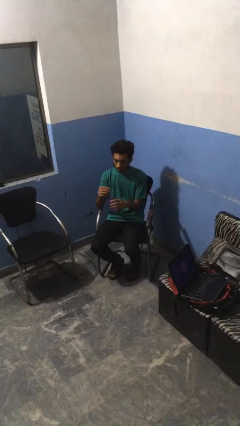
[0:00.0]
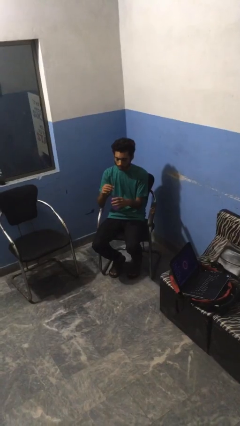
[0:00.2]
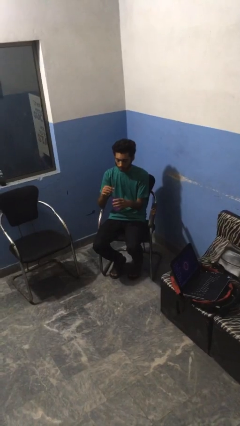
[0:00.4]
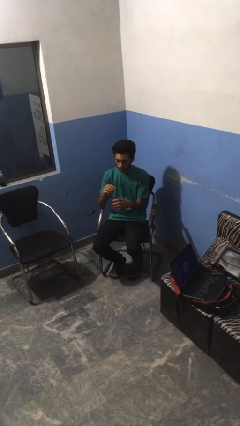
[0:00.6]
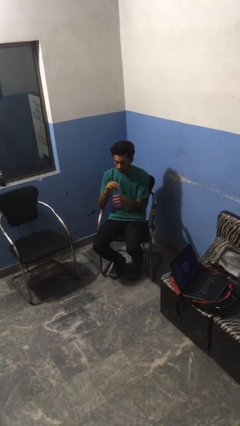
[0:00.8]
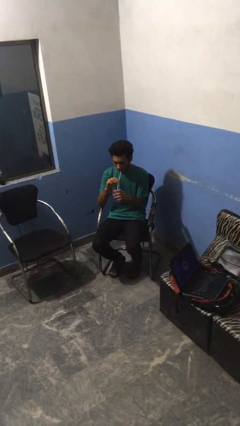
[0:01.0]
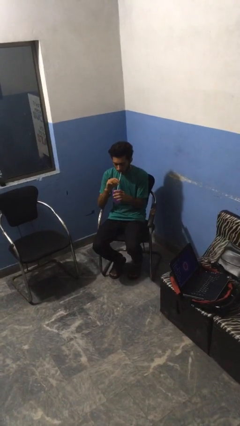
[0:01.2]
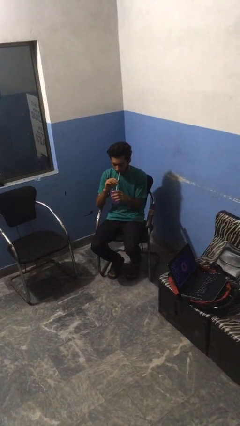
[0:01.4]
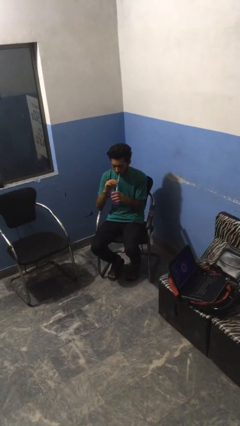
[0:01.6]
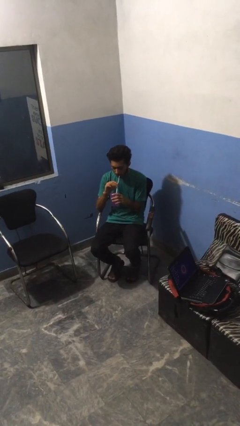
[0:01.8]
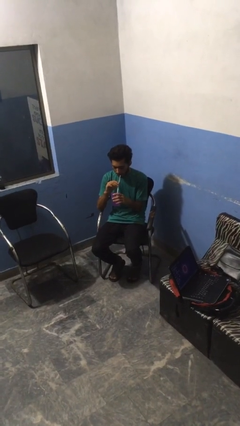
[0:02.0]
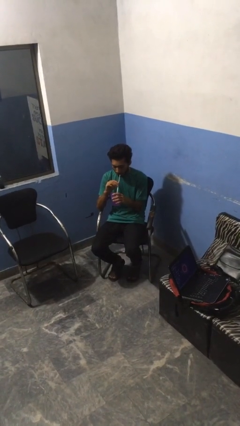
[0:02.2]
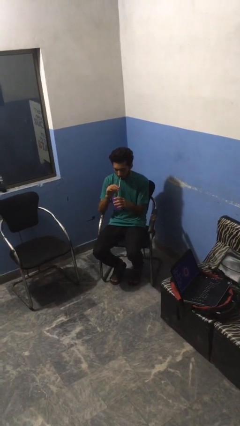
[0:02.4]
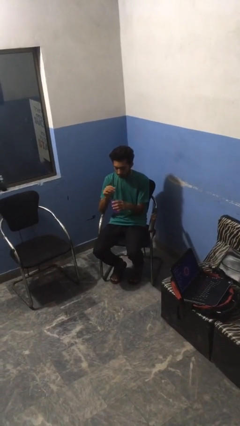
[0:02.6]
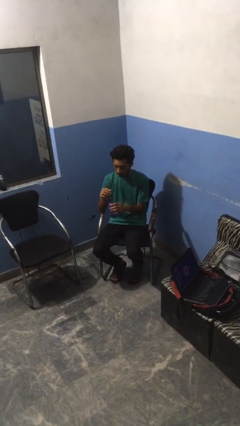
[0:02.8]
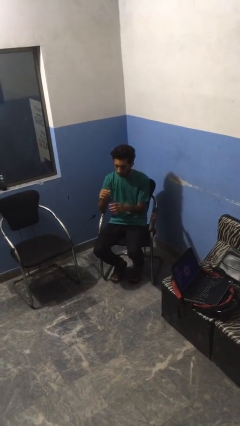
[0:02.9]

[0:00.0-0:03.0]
person drinks from straw

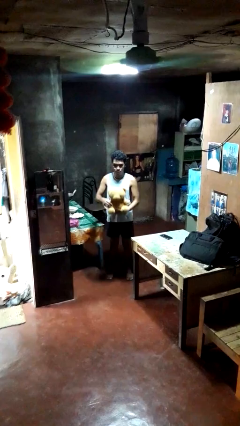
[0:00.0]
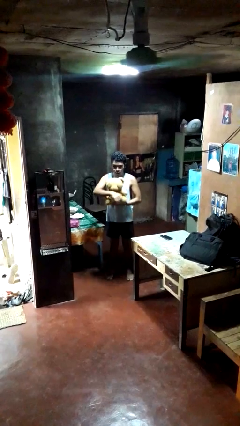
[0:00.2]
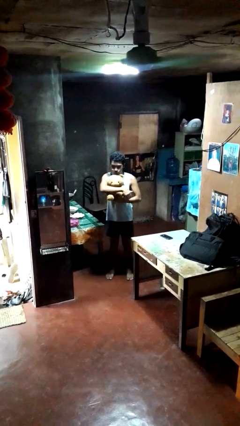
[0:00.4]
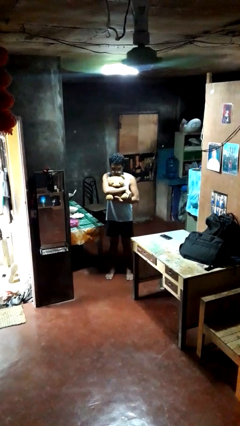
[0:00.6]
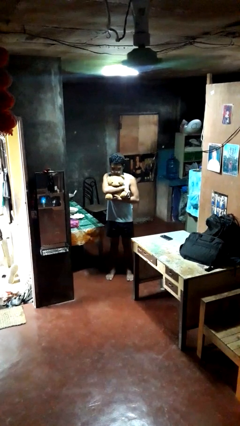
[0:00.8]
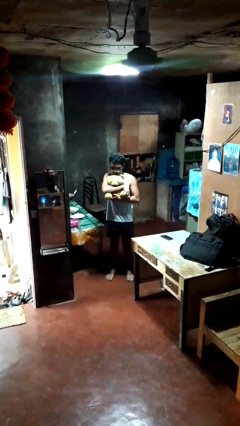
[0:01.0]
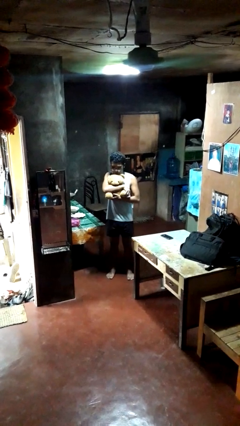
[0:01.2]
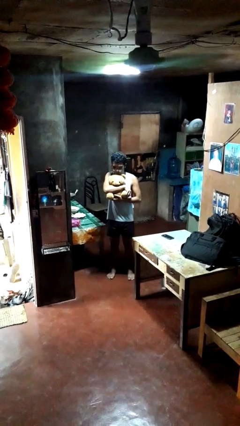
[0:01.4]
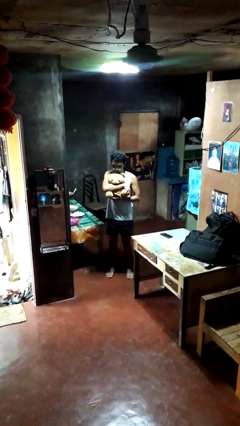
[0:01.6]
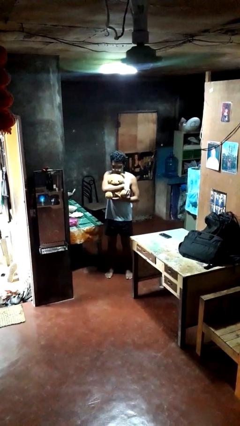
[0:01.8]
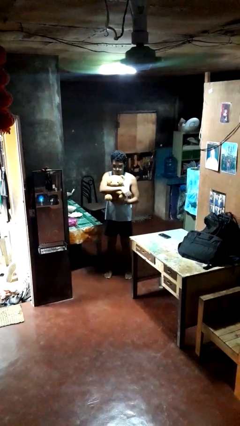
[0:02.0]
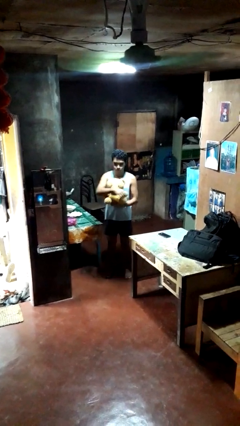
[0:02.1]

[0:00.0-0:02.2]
person hugs stuffed animal

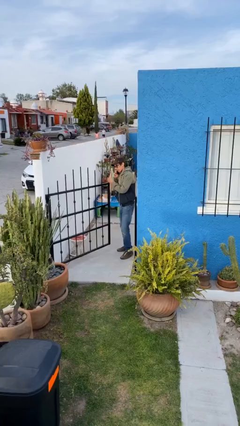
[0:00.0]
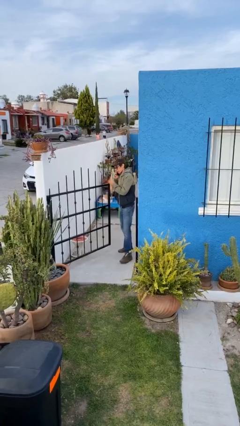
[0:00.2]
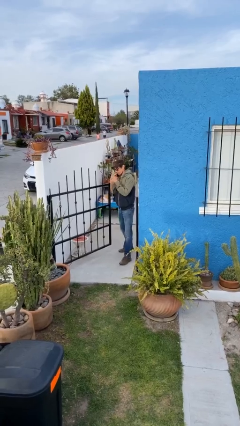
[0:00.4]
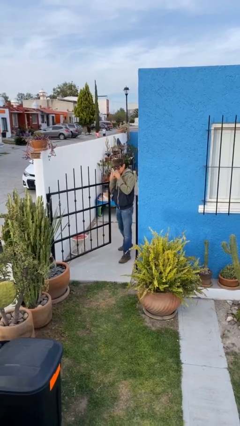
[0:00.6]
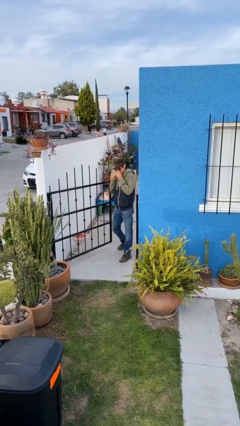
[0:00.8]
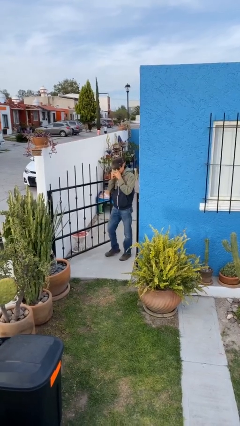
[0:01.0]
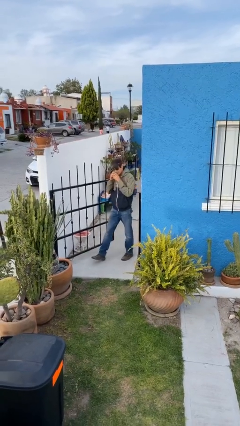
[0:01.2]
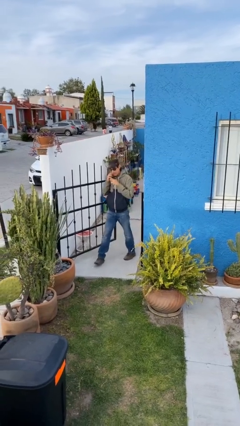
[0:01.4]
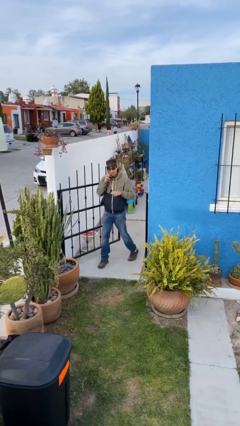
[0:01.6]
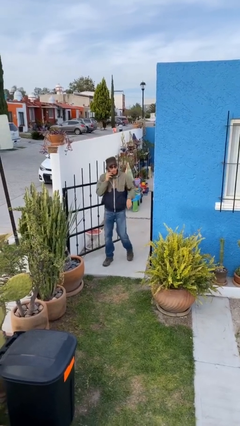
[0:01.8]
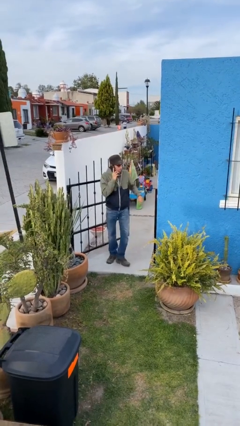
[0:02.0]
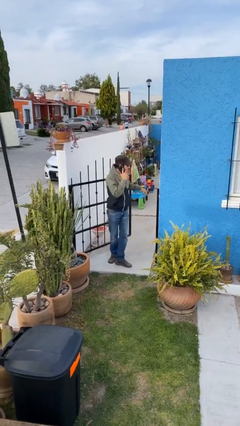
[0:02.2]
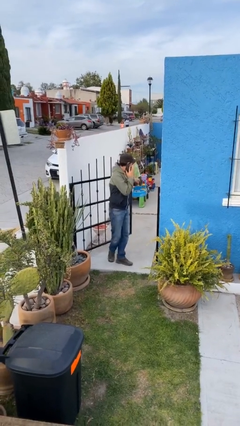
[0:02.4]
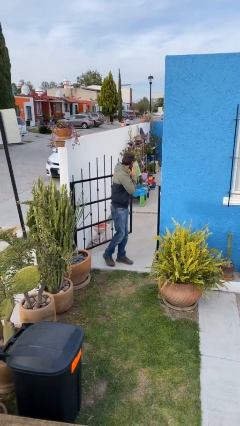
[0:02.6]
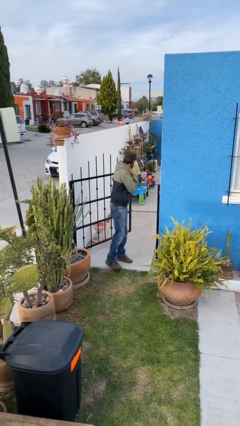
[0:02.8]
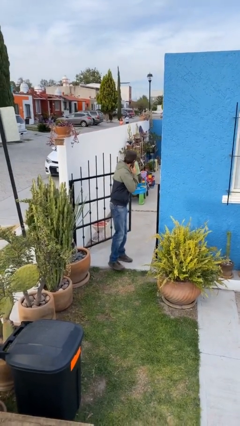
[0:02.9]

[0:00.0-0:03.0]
person enters scene through structure

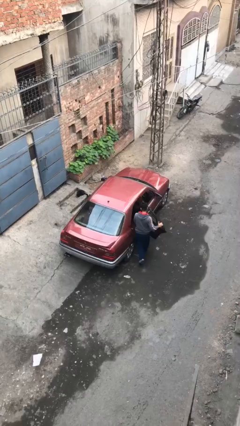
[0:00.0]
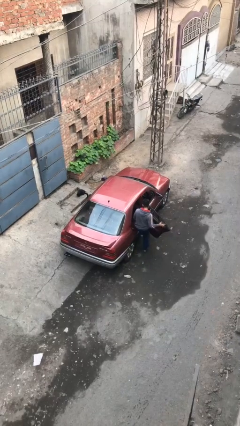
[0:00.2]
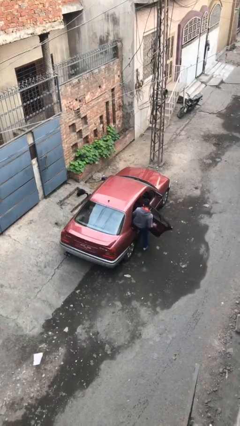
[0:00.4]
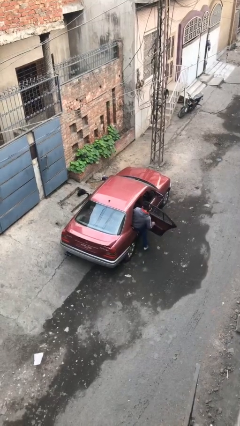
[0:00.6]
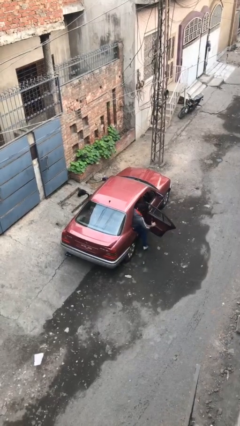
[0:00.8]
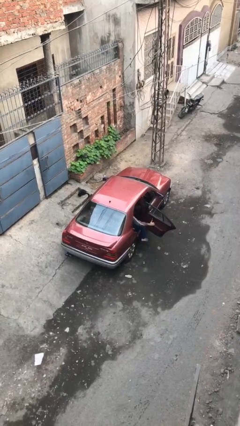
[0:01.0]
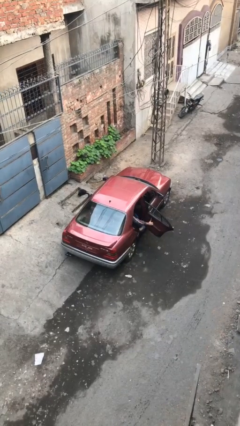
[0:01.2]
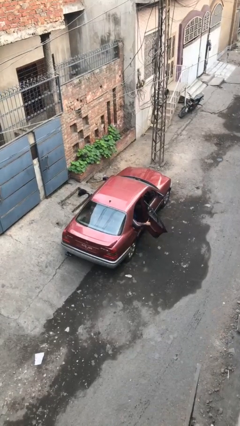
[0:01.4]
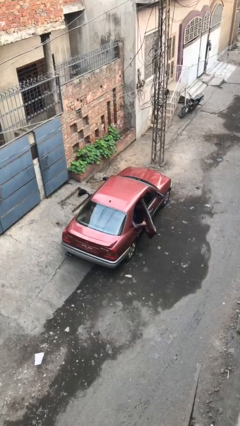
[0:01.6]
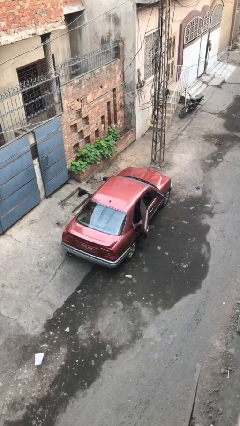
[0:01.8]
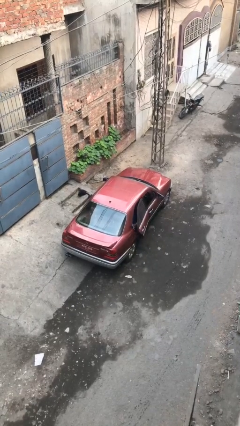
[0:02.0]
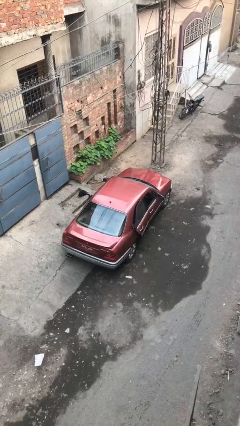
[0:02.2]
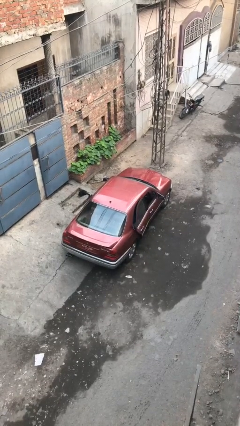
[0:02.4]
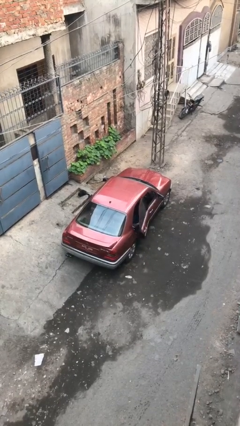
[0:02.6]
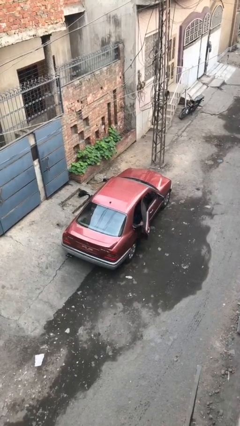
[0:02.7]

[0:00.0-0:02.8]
car picks up person

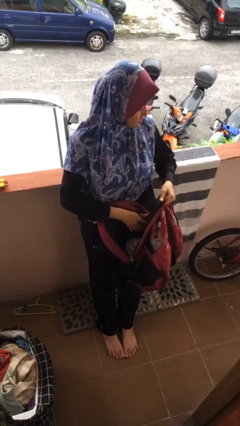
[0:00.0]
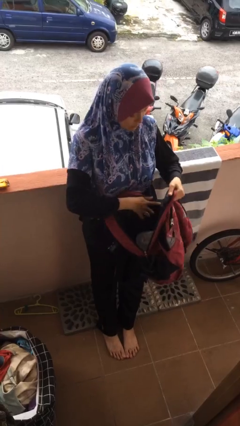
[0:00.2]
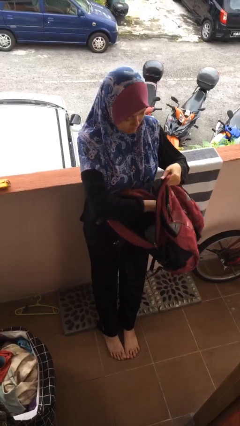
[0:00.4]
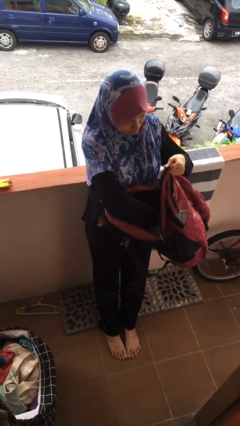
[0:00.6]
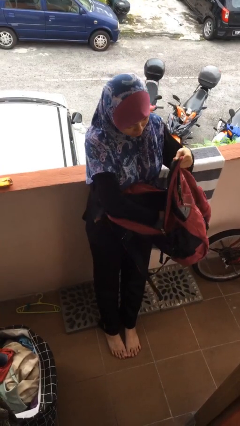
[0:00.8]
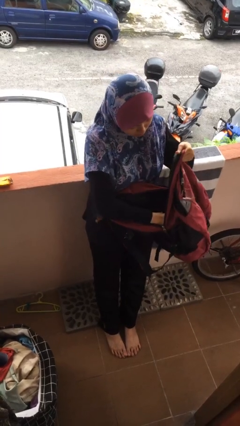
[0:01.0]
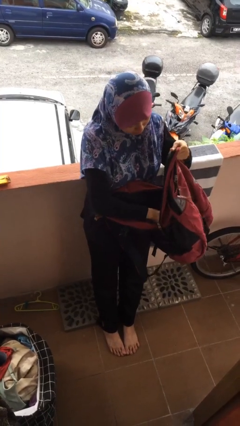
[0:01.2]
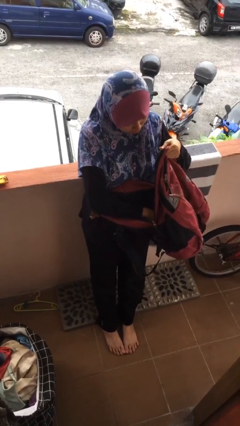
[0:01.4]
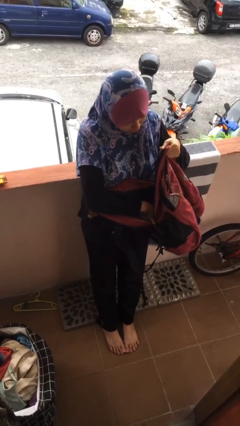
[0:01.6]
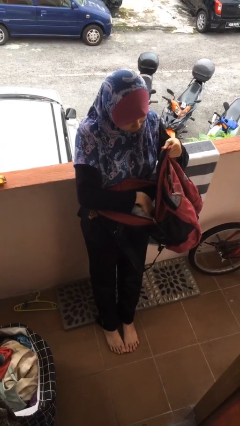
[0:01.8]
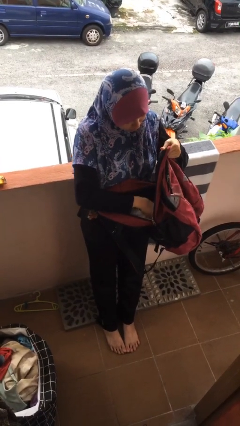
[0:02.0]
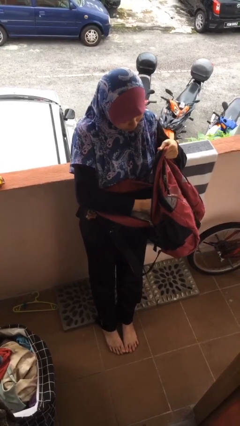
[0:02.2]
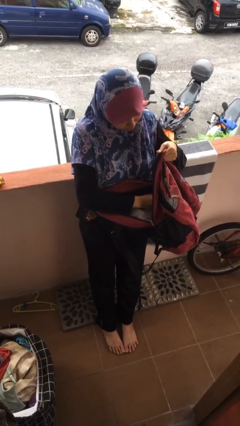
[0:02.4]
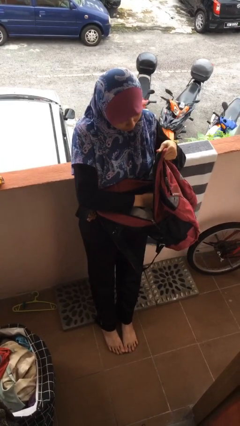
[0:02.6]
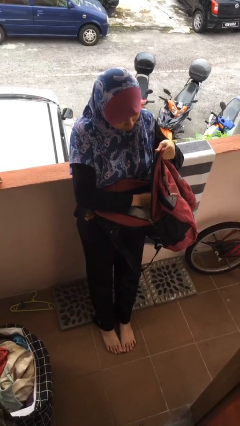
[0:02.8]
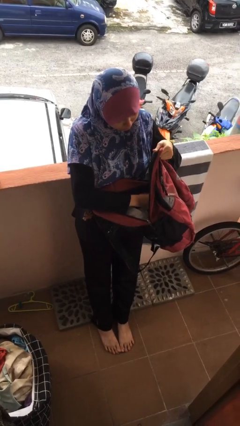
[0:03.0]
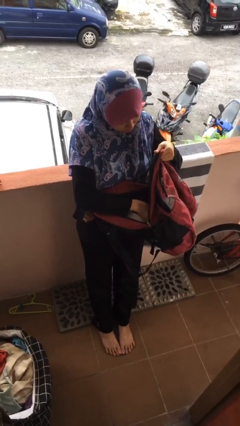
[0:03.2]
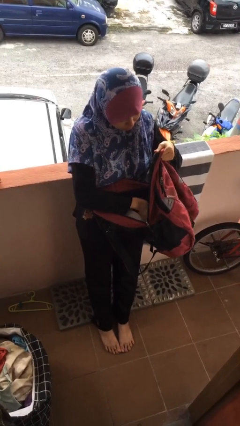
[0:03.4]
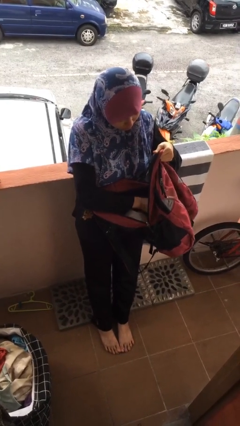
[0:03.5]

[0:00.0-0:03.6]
person searches in backpack

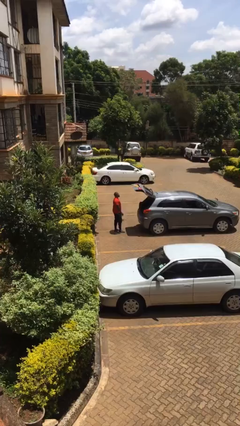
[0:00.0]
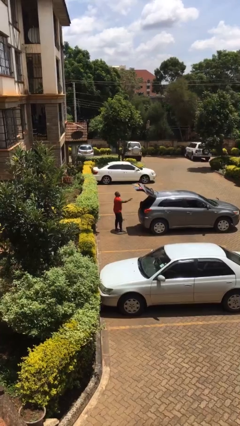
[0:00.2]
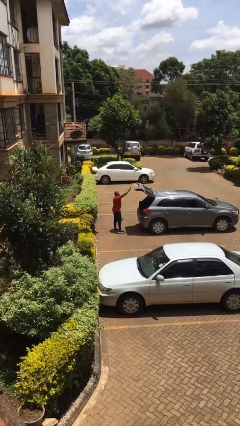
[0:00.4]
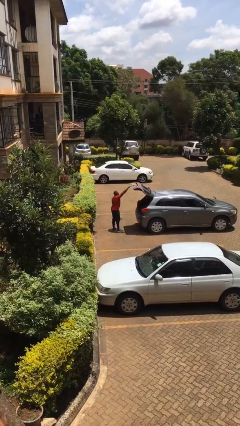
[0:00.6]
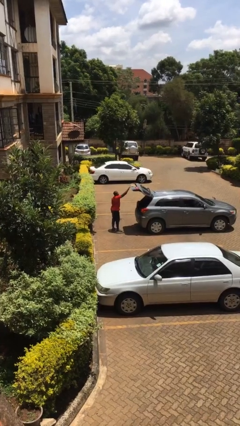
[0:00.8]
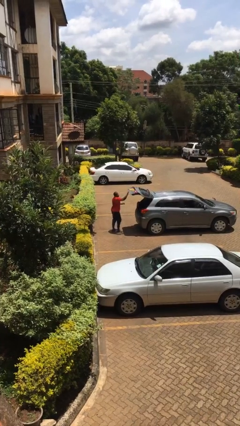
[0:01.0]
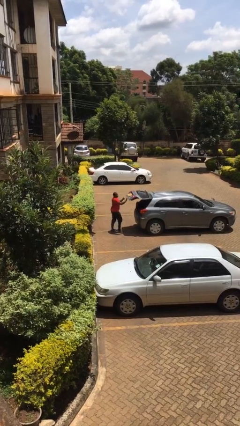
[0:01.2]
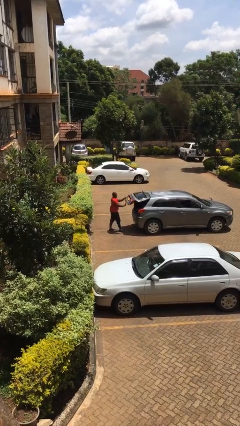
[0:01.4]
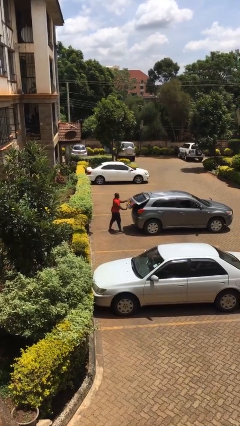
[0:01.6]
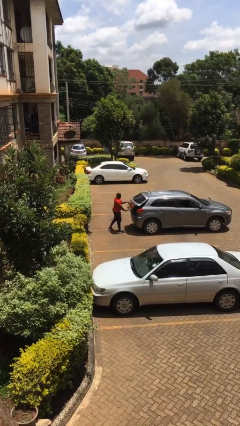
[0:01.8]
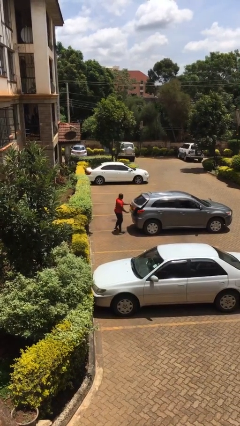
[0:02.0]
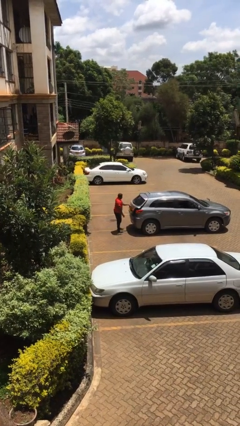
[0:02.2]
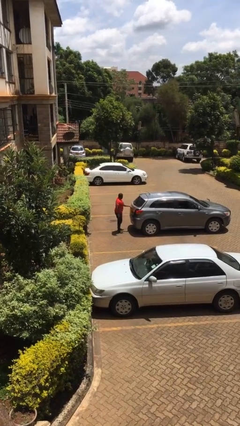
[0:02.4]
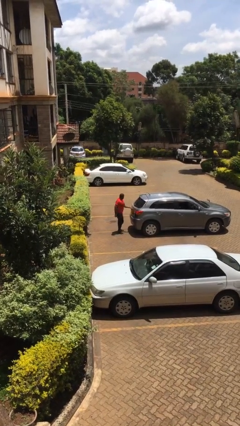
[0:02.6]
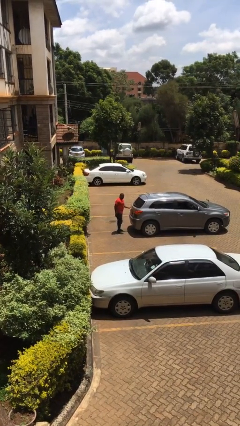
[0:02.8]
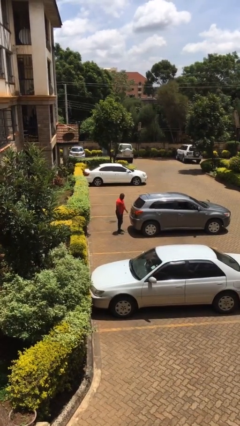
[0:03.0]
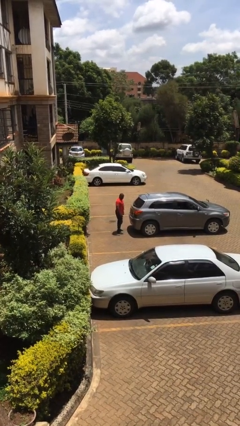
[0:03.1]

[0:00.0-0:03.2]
person closes car trunk
